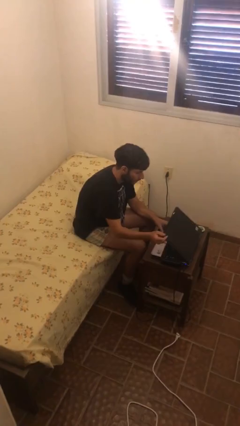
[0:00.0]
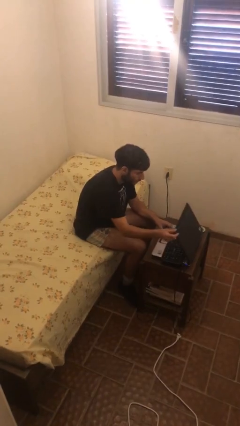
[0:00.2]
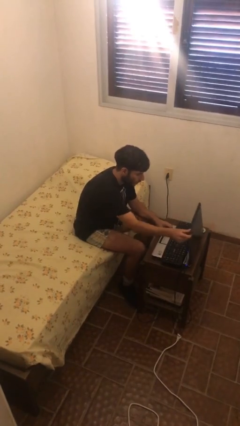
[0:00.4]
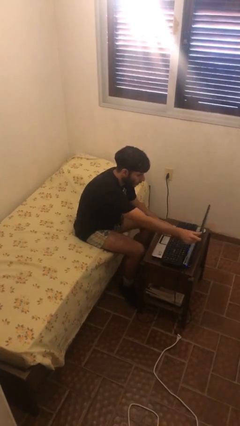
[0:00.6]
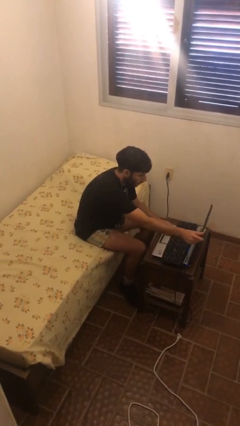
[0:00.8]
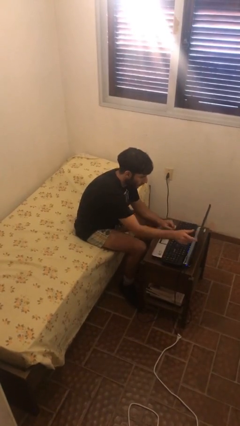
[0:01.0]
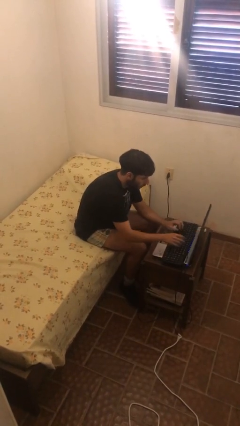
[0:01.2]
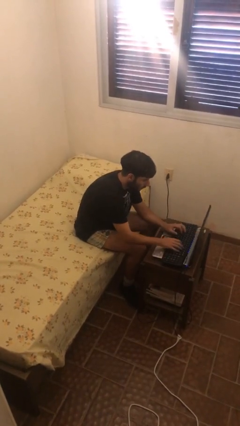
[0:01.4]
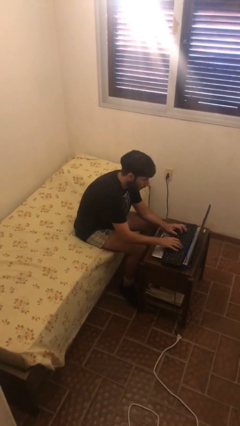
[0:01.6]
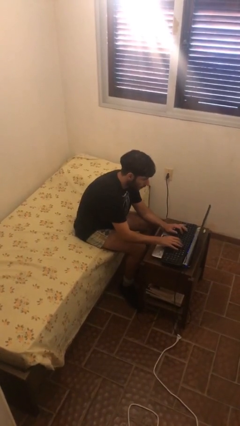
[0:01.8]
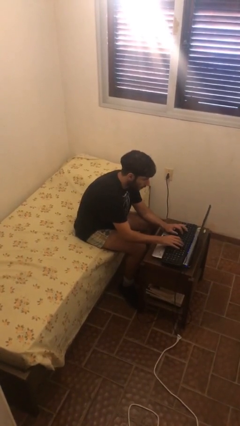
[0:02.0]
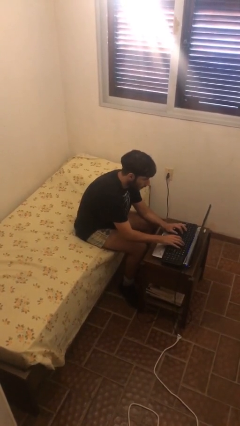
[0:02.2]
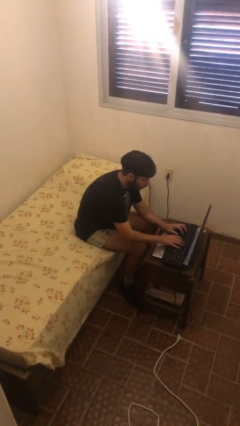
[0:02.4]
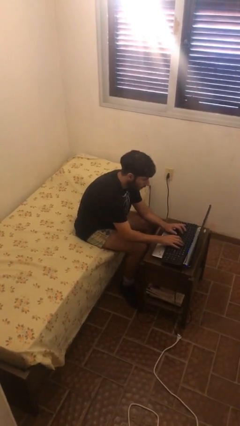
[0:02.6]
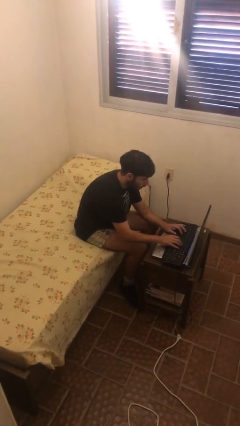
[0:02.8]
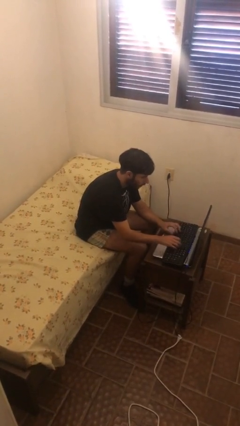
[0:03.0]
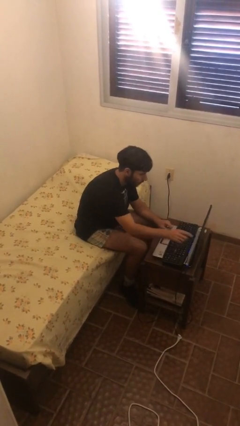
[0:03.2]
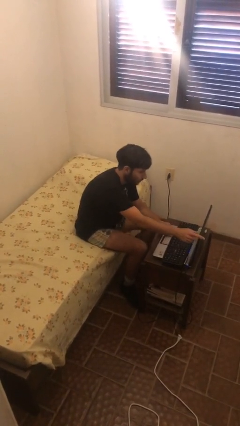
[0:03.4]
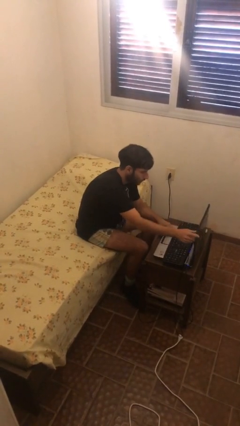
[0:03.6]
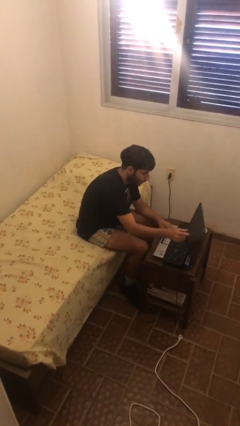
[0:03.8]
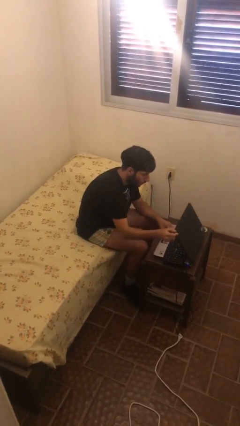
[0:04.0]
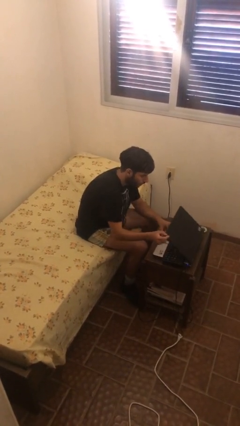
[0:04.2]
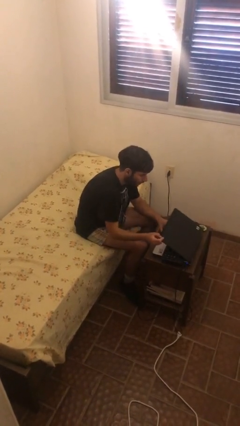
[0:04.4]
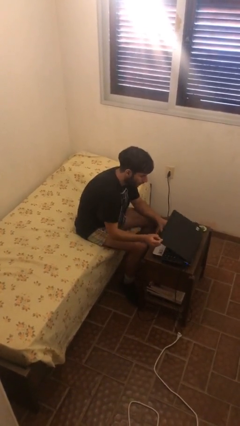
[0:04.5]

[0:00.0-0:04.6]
person interacts with laptop

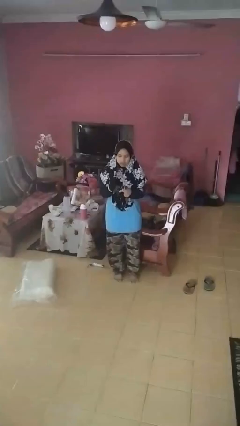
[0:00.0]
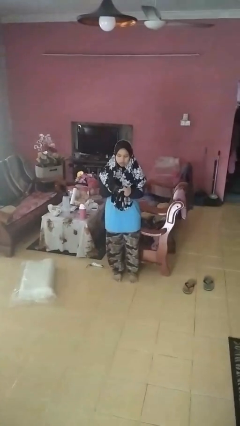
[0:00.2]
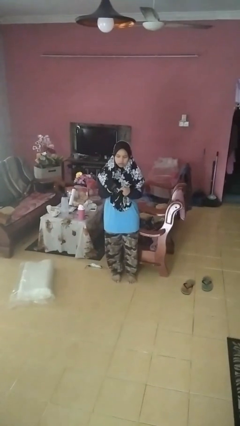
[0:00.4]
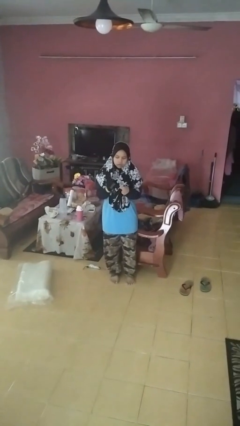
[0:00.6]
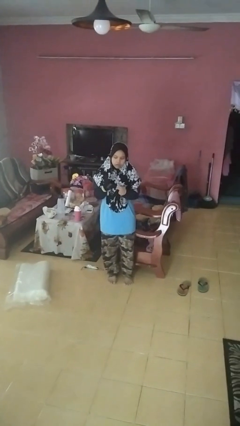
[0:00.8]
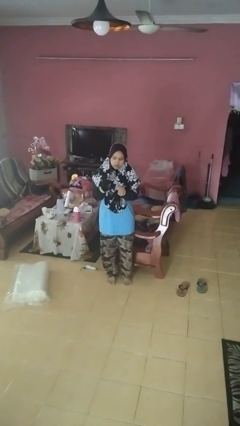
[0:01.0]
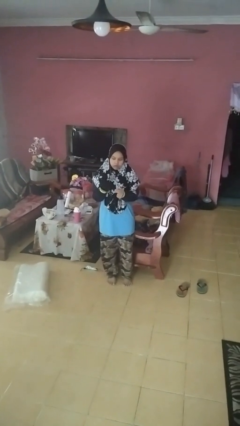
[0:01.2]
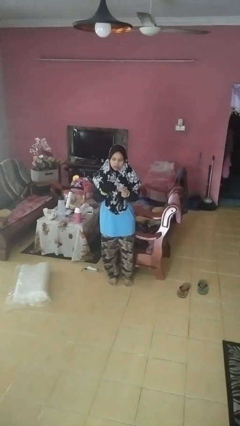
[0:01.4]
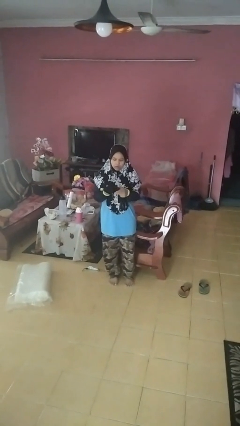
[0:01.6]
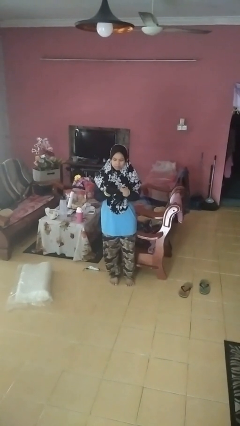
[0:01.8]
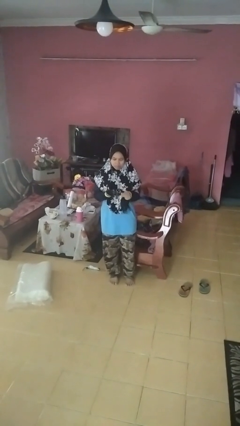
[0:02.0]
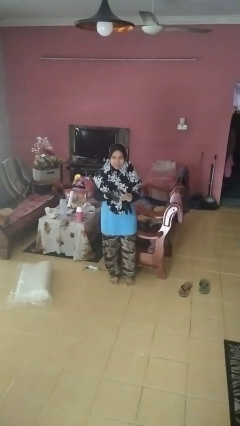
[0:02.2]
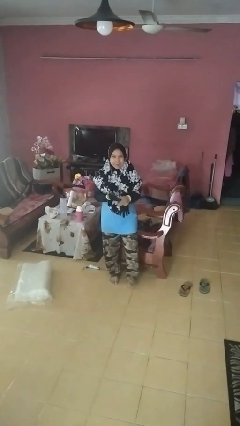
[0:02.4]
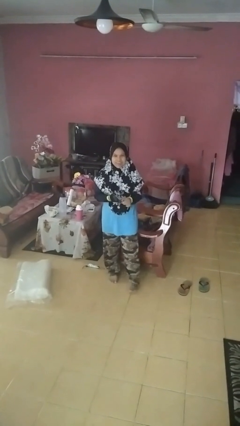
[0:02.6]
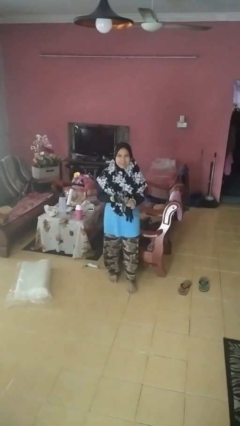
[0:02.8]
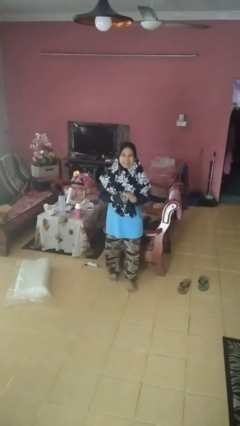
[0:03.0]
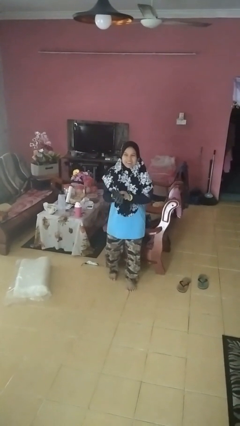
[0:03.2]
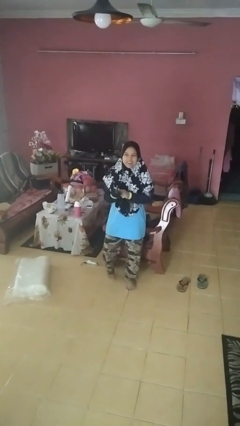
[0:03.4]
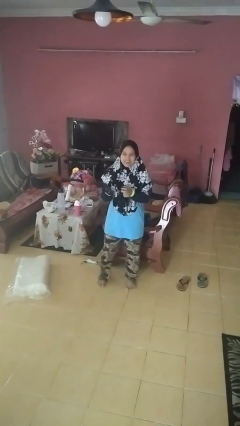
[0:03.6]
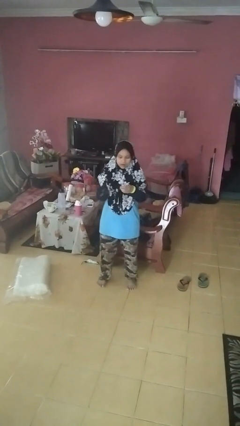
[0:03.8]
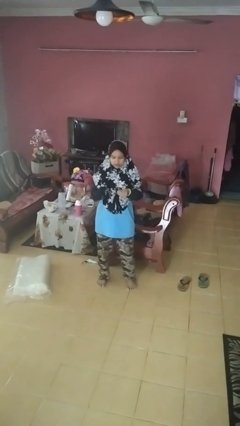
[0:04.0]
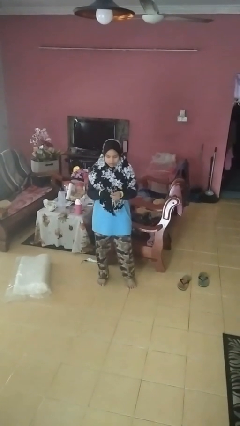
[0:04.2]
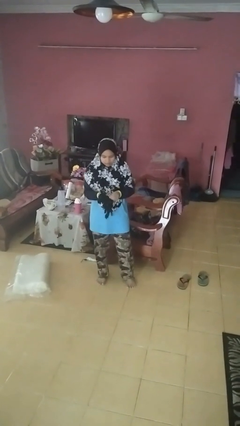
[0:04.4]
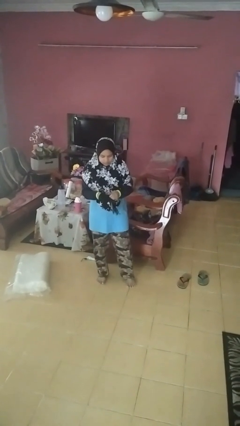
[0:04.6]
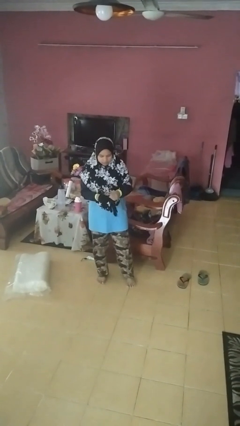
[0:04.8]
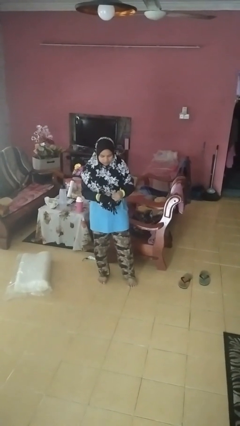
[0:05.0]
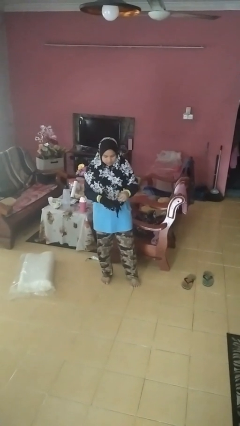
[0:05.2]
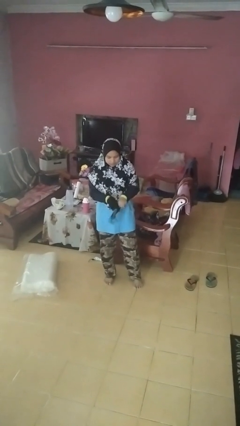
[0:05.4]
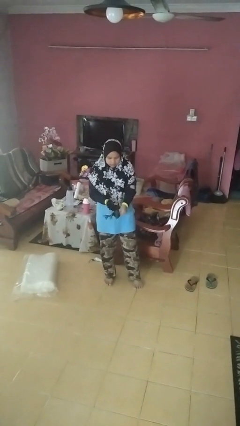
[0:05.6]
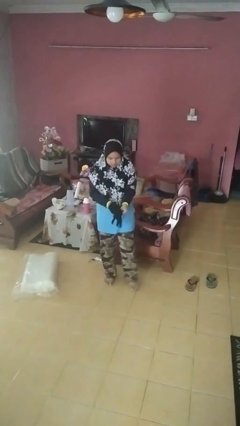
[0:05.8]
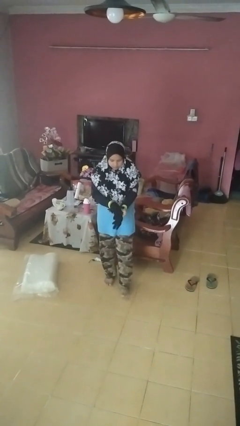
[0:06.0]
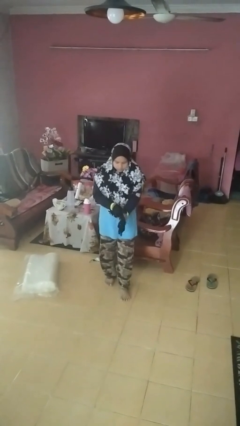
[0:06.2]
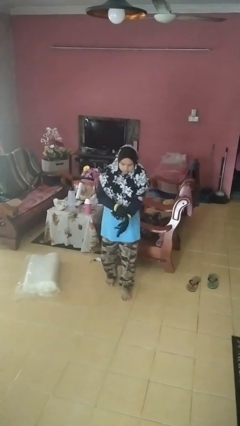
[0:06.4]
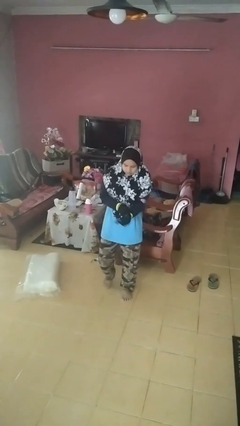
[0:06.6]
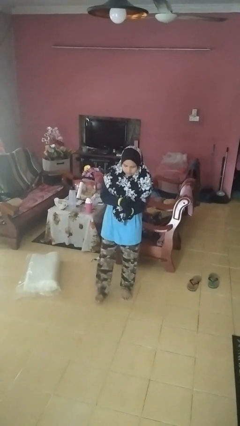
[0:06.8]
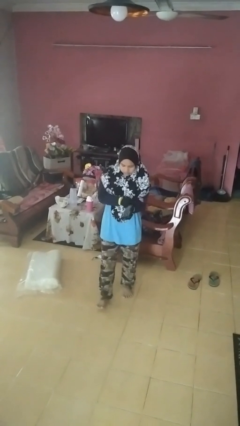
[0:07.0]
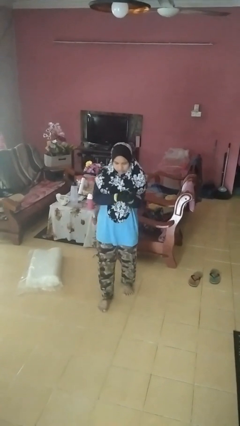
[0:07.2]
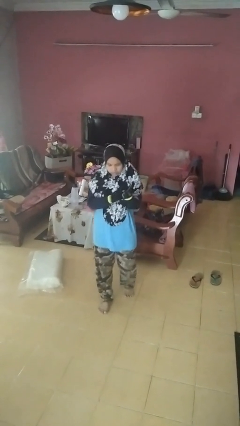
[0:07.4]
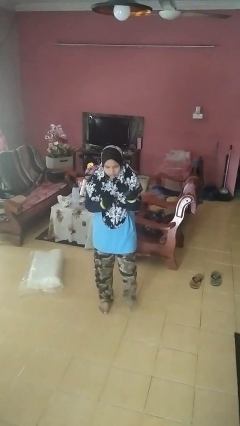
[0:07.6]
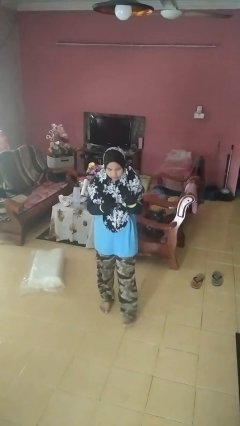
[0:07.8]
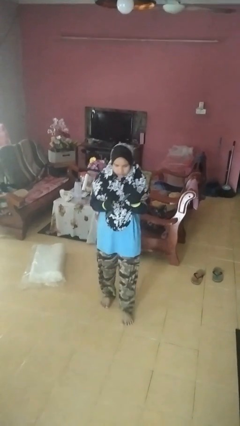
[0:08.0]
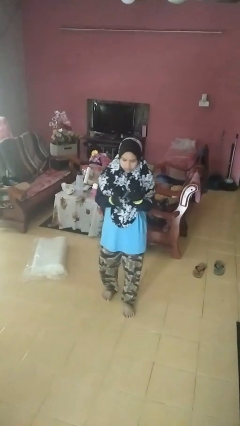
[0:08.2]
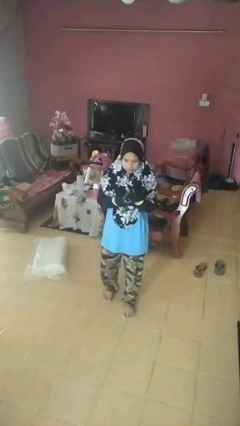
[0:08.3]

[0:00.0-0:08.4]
person puts on gloves

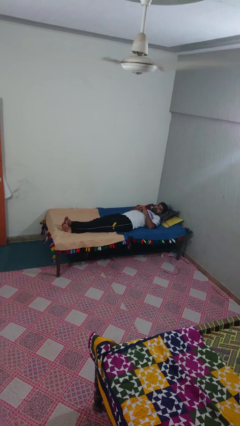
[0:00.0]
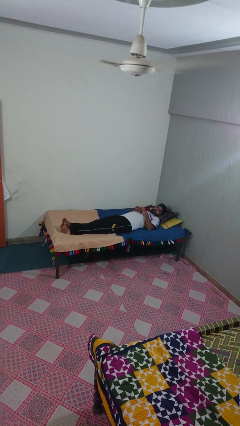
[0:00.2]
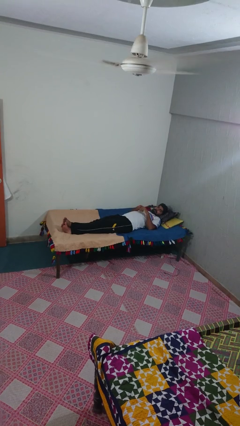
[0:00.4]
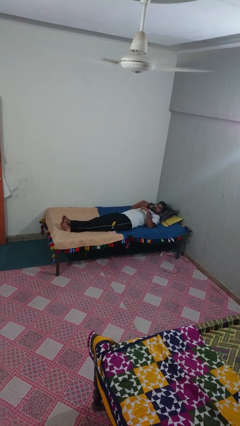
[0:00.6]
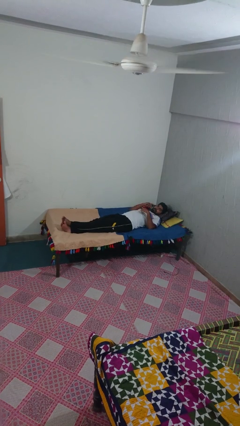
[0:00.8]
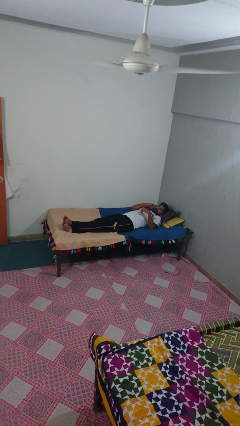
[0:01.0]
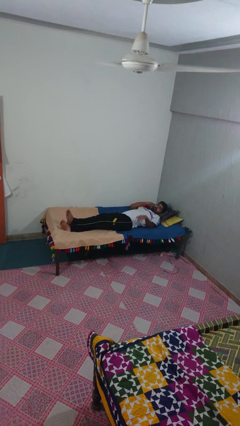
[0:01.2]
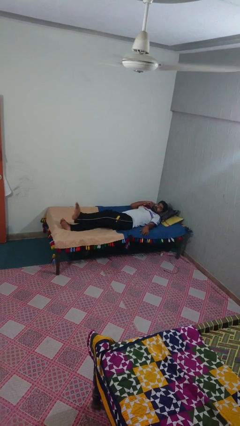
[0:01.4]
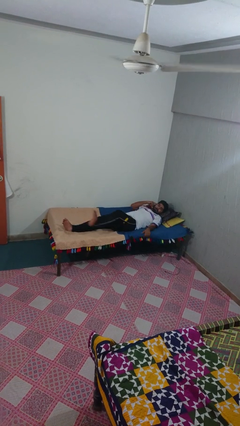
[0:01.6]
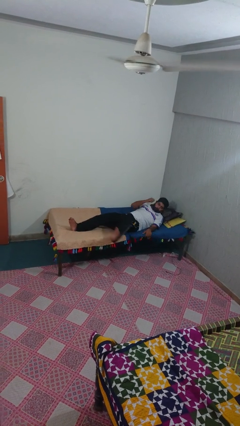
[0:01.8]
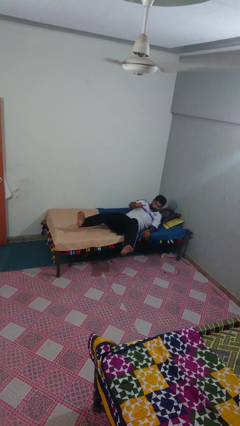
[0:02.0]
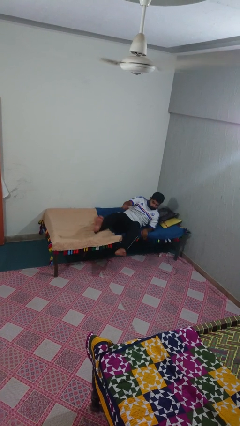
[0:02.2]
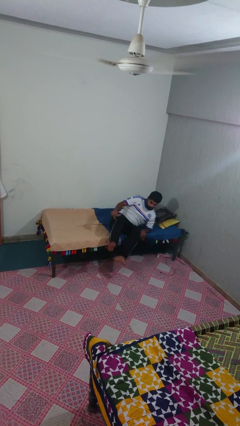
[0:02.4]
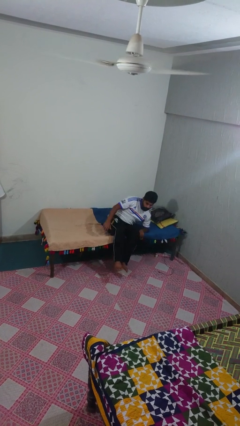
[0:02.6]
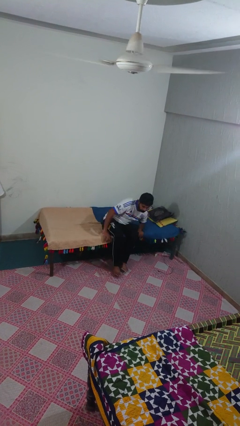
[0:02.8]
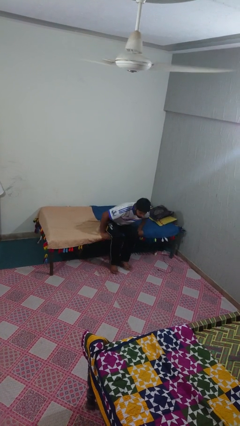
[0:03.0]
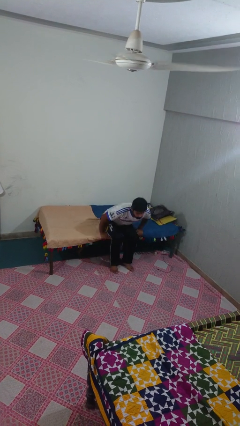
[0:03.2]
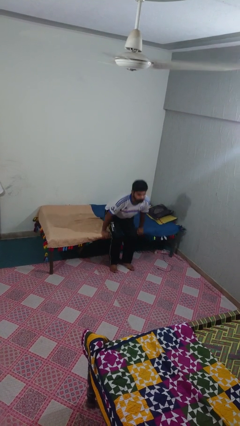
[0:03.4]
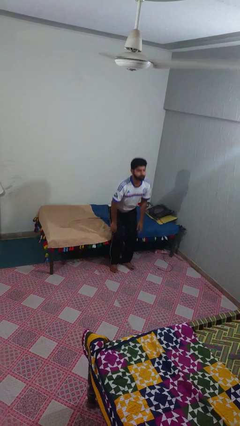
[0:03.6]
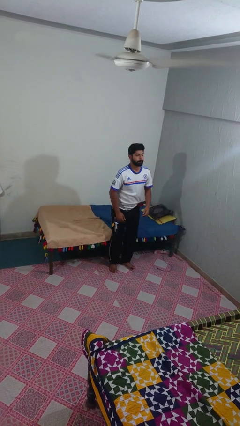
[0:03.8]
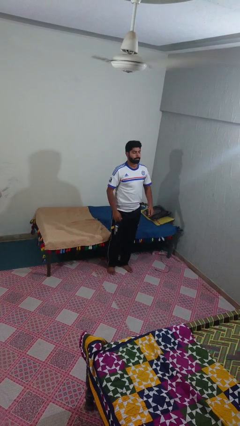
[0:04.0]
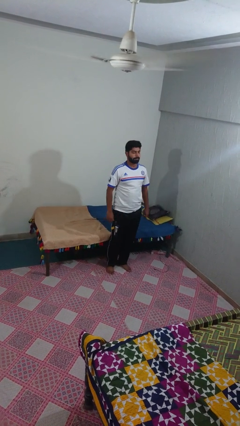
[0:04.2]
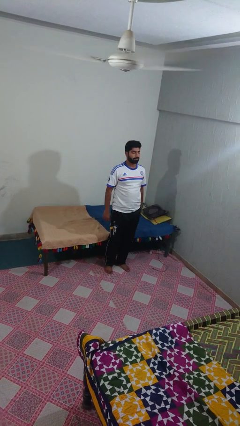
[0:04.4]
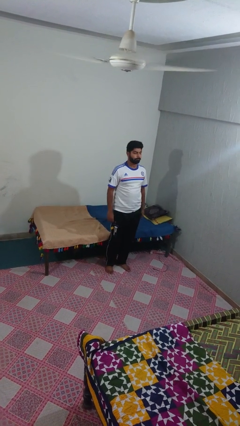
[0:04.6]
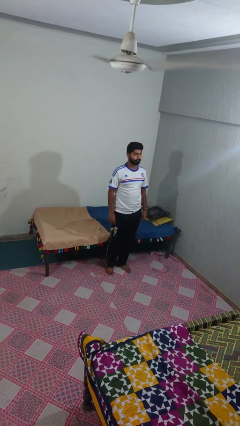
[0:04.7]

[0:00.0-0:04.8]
person stands up

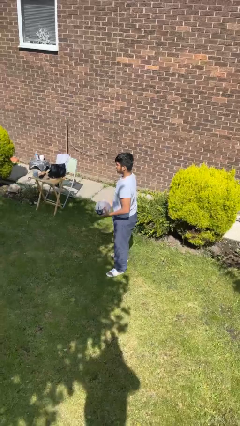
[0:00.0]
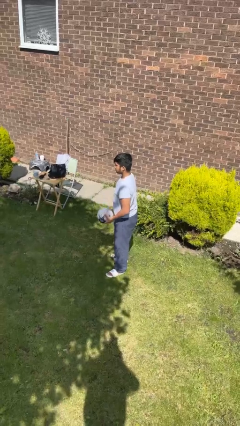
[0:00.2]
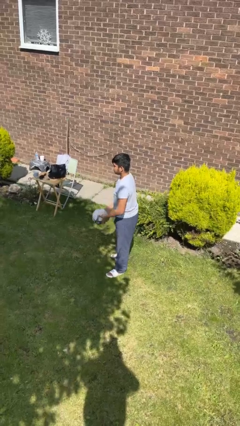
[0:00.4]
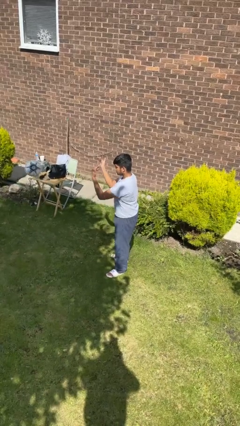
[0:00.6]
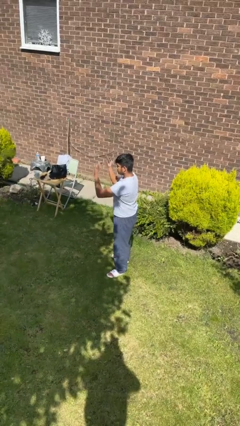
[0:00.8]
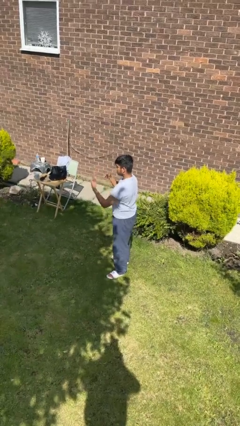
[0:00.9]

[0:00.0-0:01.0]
person throws object to person
